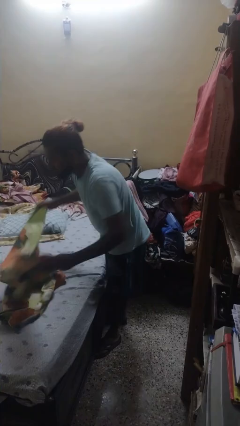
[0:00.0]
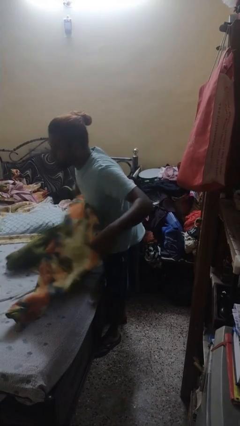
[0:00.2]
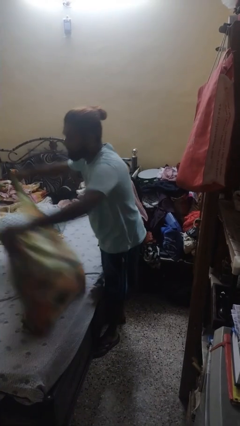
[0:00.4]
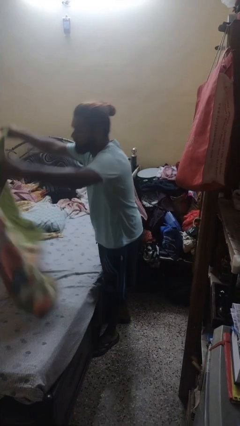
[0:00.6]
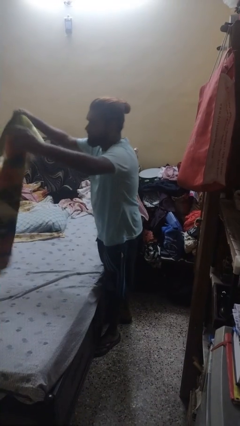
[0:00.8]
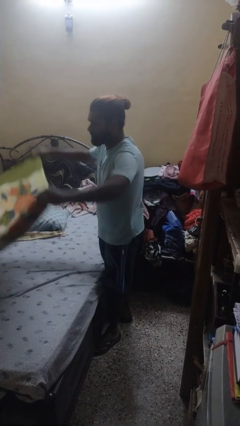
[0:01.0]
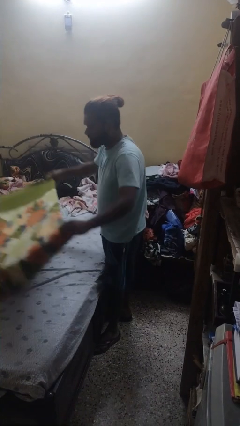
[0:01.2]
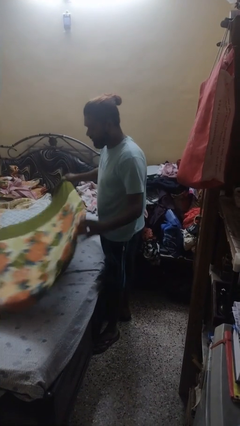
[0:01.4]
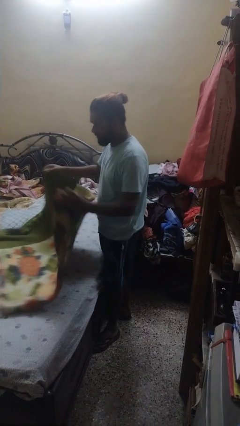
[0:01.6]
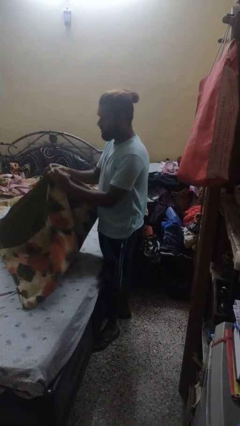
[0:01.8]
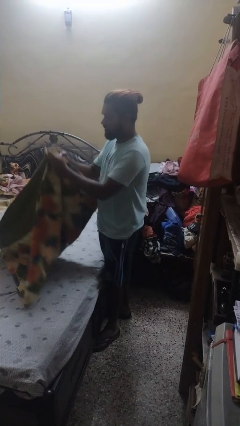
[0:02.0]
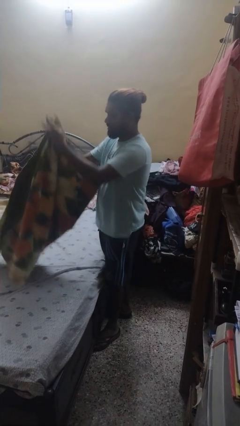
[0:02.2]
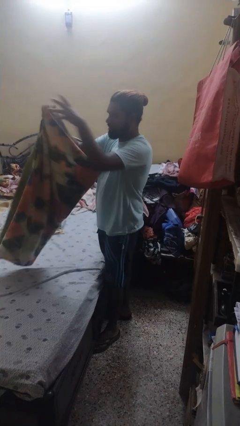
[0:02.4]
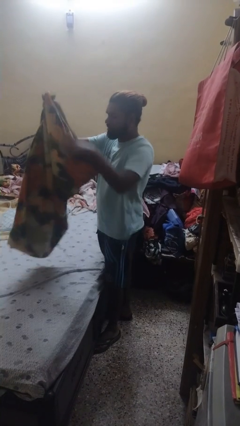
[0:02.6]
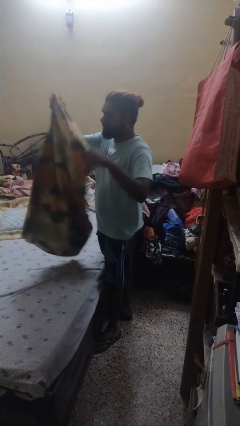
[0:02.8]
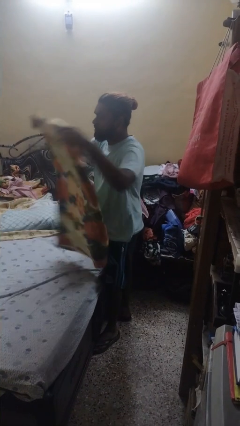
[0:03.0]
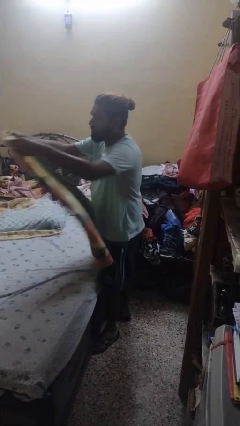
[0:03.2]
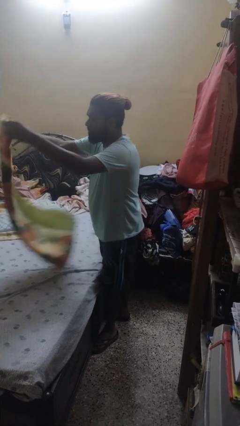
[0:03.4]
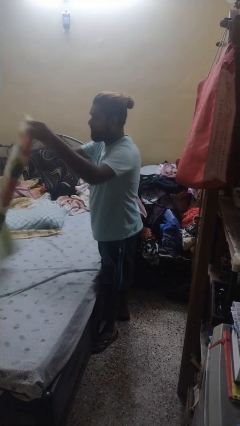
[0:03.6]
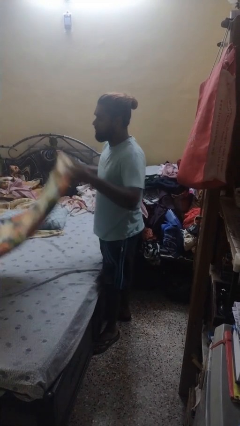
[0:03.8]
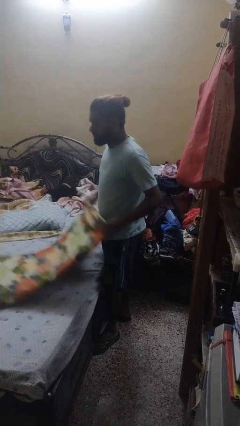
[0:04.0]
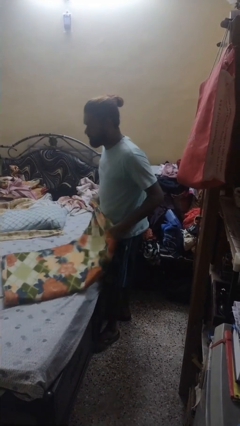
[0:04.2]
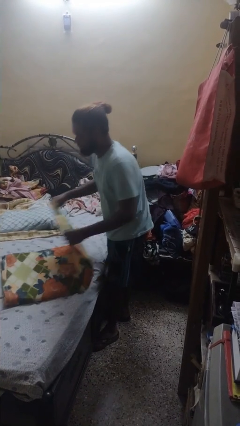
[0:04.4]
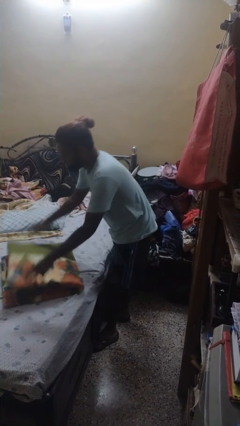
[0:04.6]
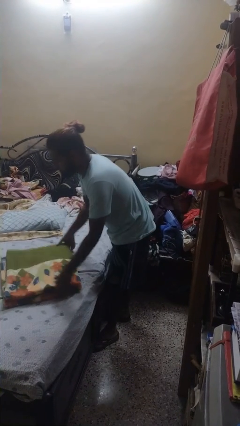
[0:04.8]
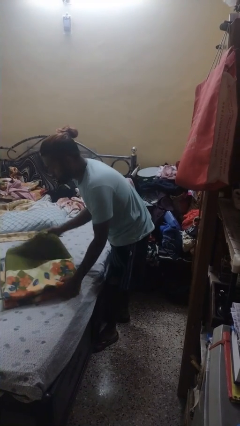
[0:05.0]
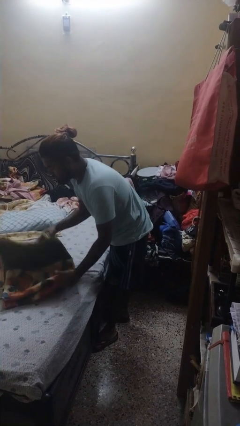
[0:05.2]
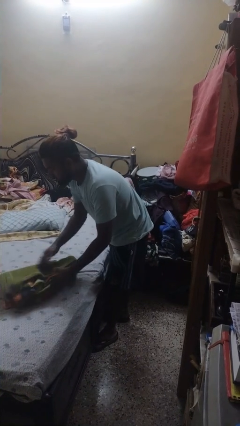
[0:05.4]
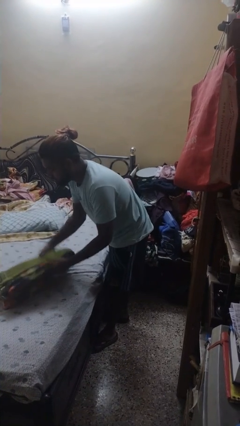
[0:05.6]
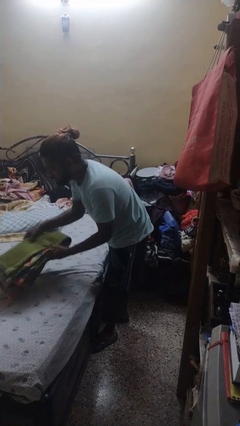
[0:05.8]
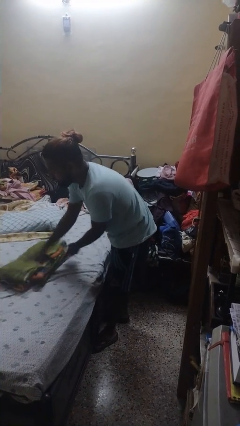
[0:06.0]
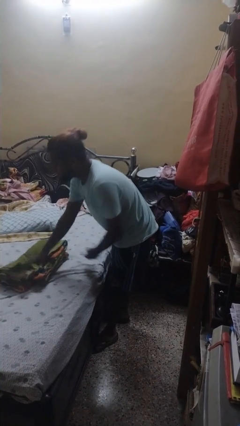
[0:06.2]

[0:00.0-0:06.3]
person folds blanket

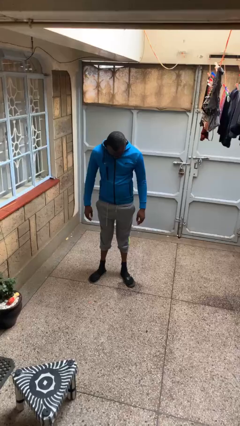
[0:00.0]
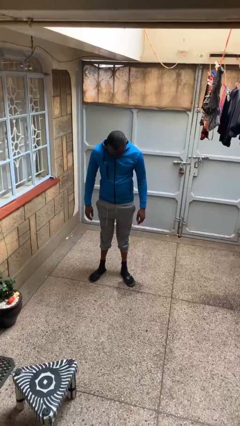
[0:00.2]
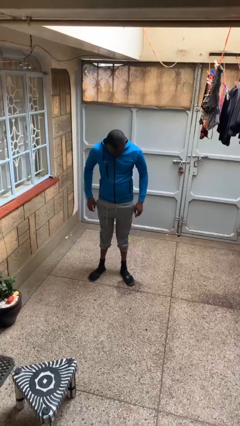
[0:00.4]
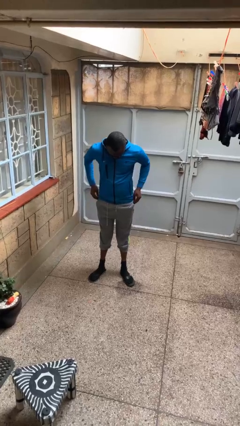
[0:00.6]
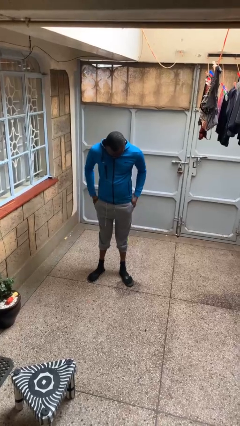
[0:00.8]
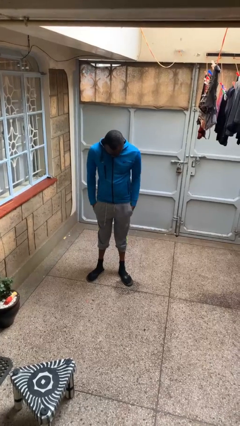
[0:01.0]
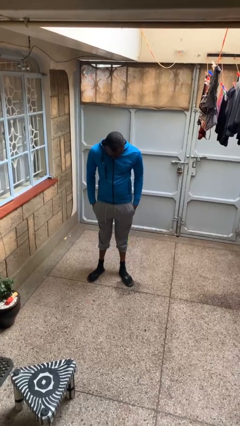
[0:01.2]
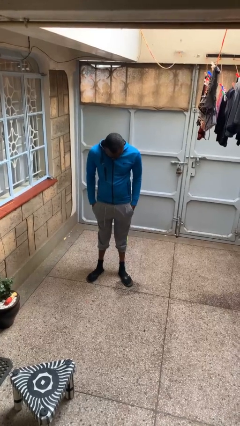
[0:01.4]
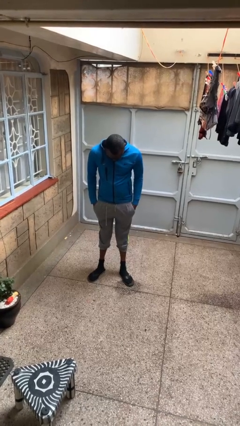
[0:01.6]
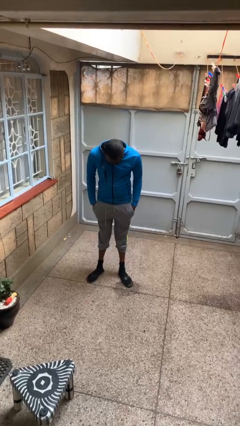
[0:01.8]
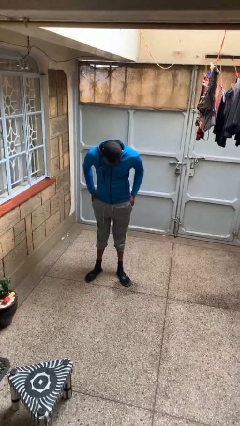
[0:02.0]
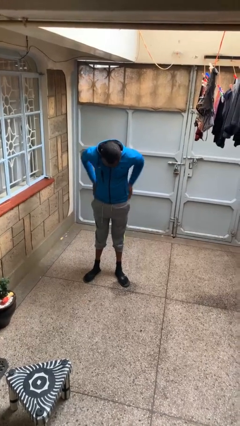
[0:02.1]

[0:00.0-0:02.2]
person puts hands in back pockets

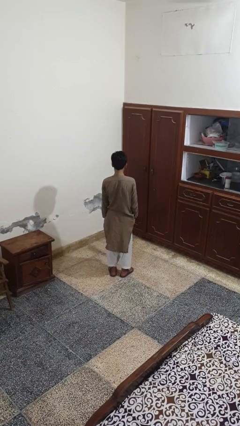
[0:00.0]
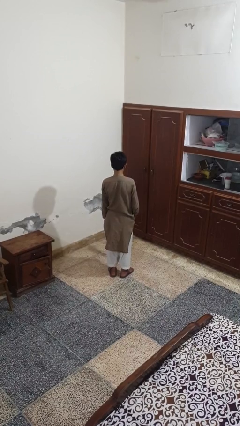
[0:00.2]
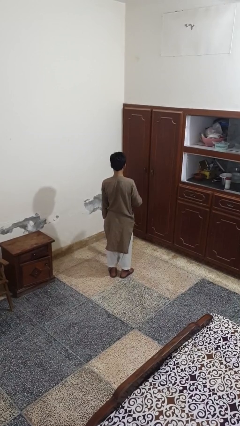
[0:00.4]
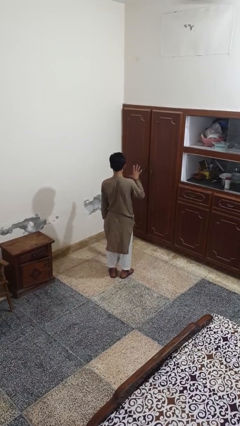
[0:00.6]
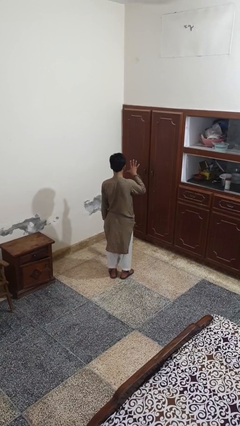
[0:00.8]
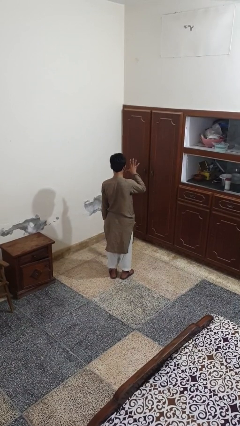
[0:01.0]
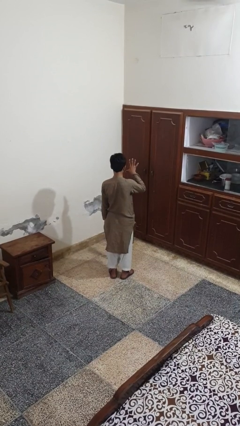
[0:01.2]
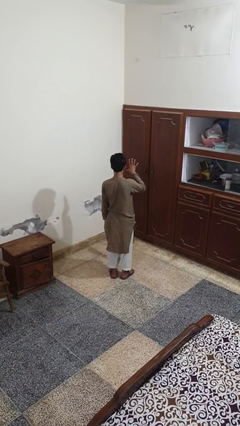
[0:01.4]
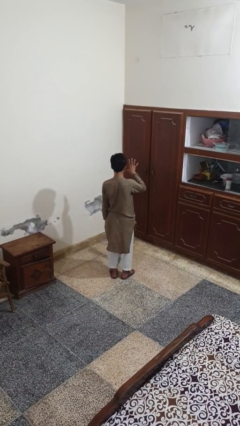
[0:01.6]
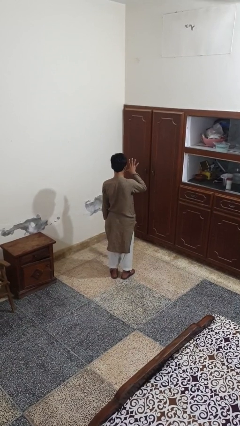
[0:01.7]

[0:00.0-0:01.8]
person gestures number five

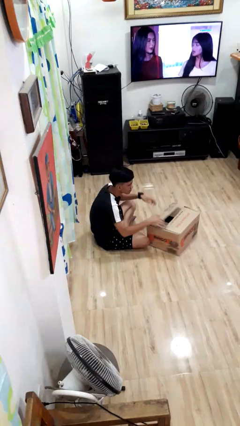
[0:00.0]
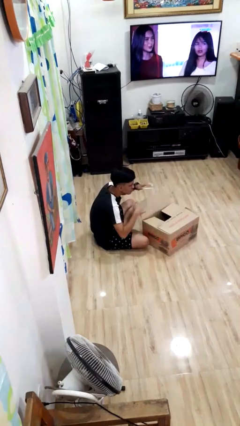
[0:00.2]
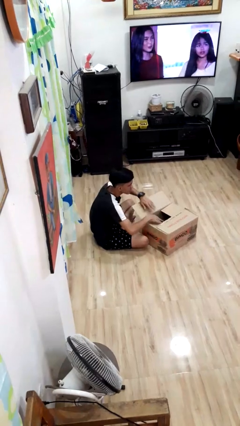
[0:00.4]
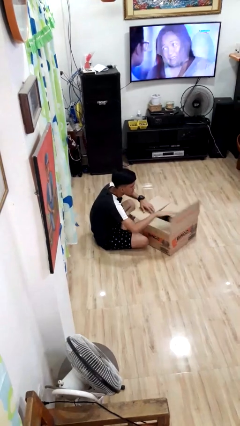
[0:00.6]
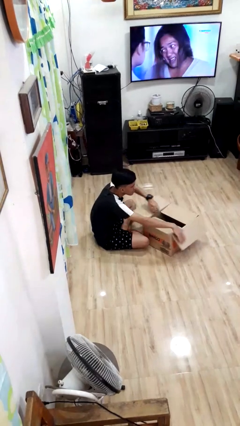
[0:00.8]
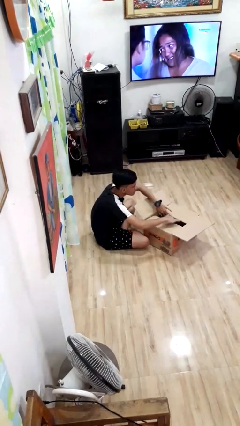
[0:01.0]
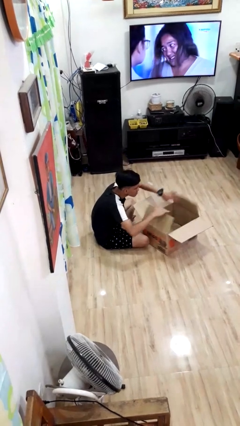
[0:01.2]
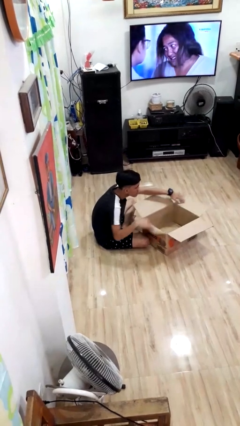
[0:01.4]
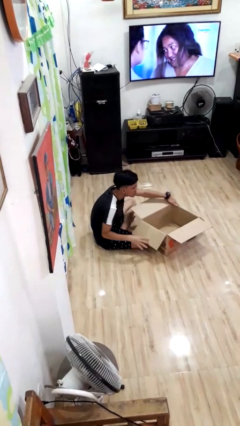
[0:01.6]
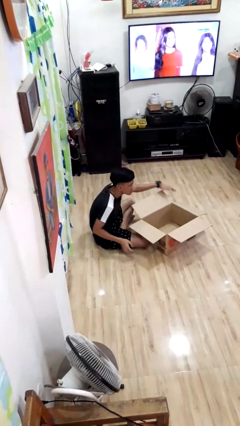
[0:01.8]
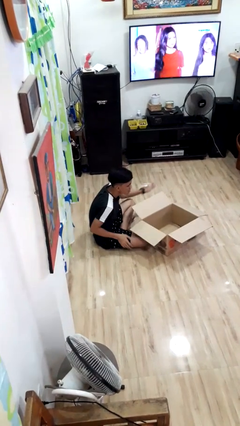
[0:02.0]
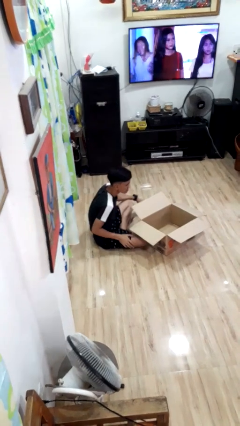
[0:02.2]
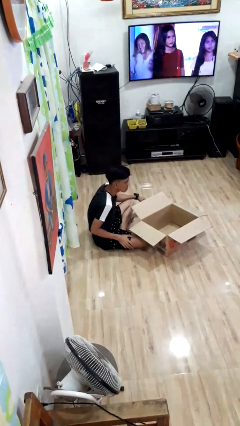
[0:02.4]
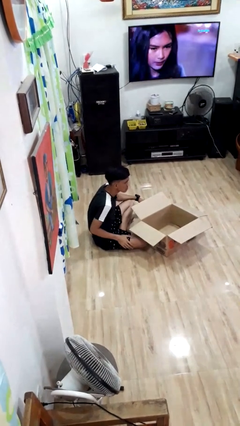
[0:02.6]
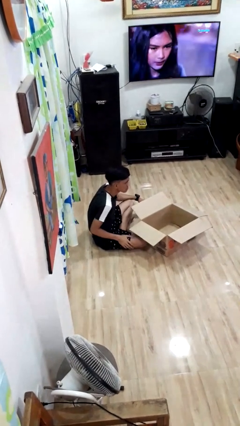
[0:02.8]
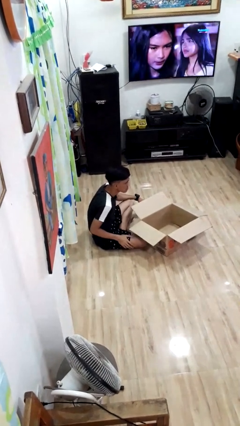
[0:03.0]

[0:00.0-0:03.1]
person opens box

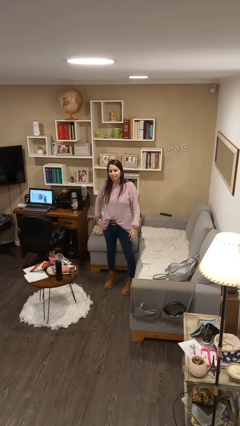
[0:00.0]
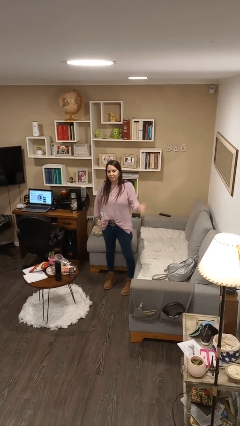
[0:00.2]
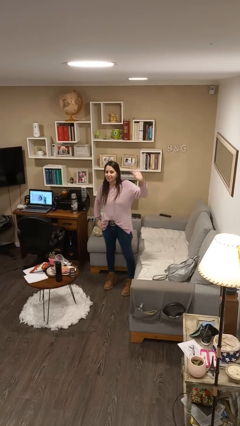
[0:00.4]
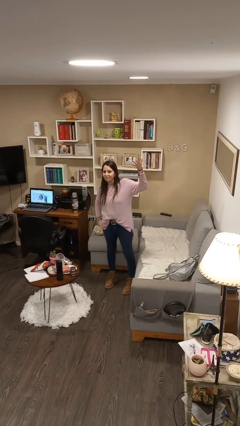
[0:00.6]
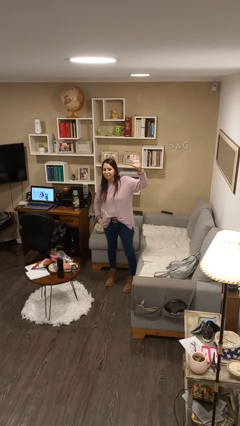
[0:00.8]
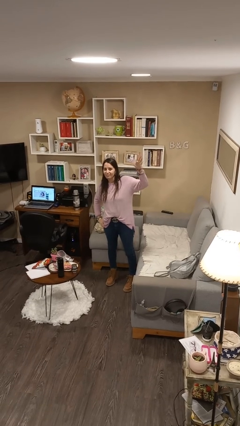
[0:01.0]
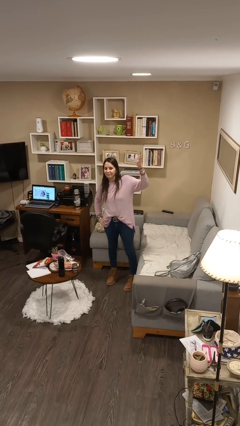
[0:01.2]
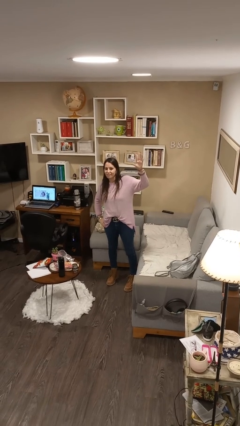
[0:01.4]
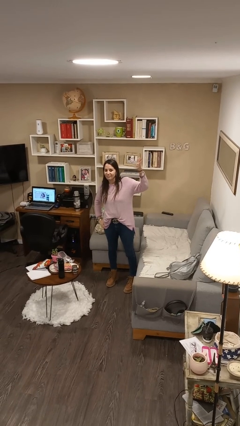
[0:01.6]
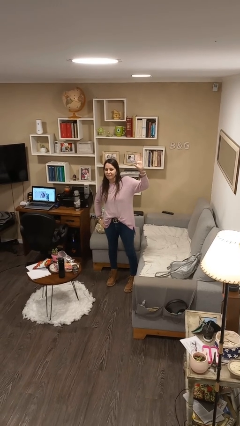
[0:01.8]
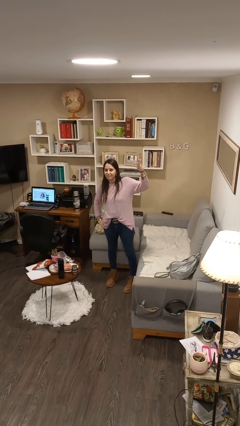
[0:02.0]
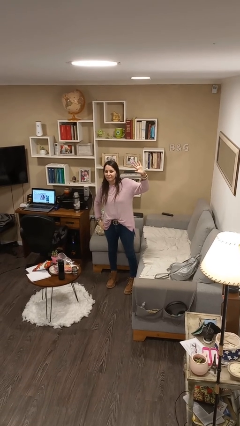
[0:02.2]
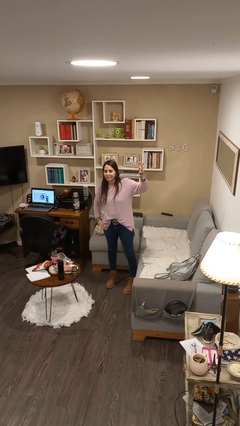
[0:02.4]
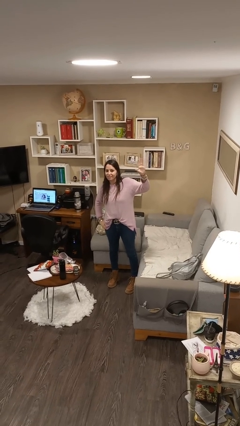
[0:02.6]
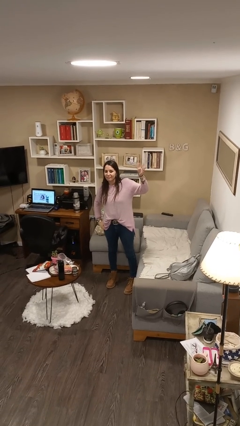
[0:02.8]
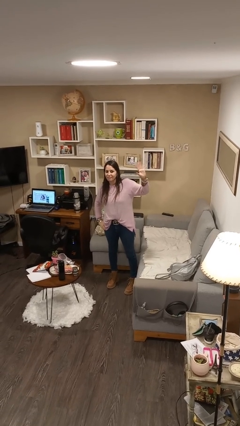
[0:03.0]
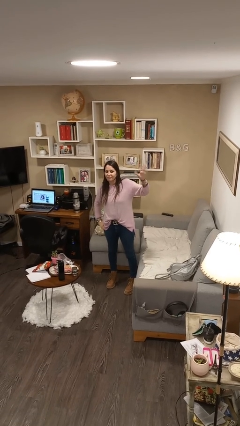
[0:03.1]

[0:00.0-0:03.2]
person waves at person

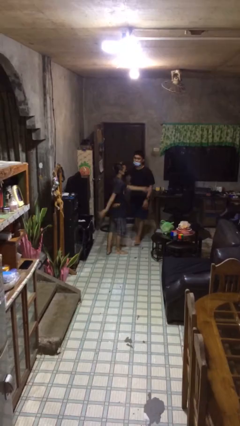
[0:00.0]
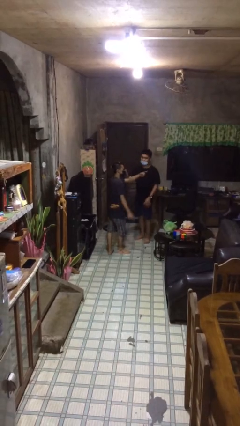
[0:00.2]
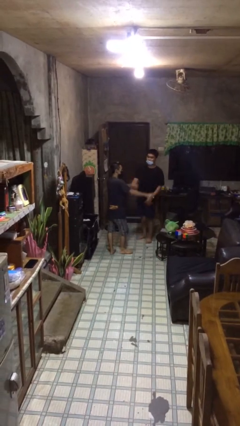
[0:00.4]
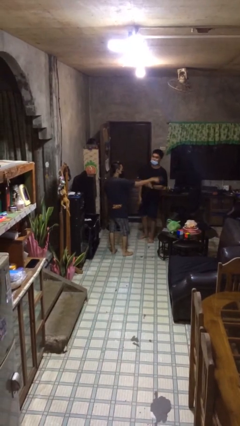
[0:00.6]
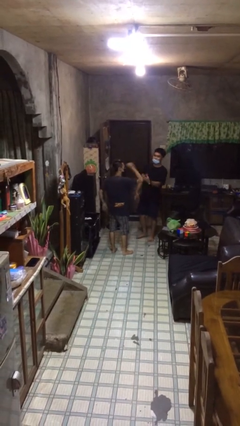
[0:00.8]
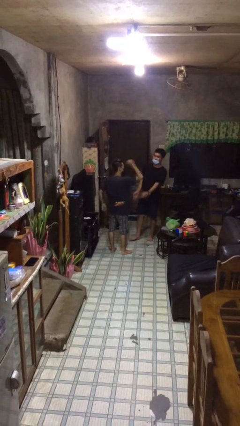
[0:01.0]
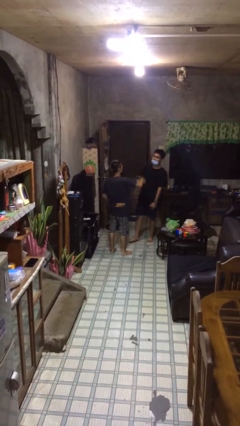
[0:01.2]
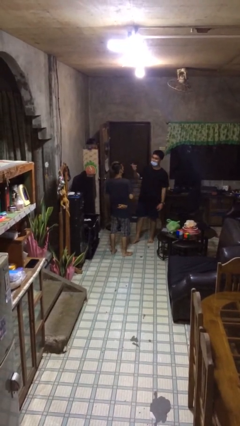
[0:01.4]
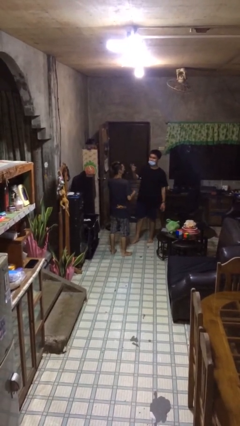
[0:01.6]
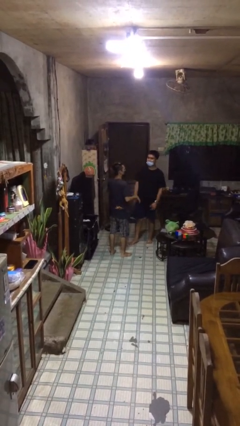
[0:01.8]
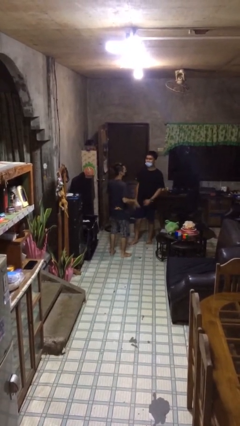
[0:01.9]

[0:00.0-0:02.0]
person talks to person
